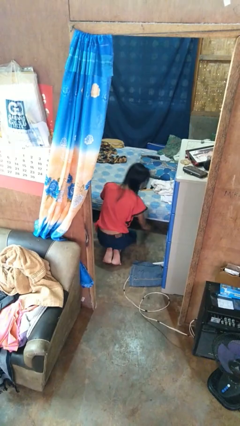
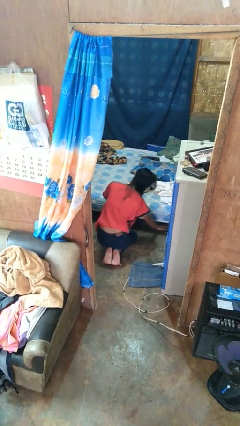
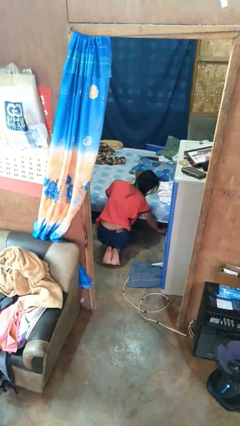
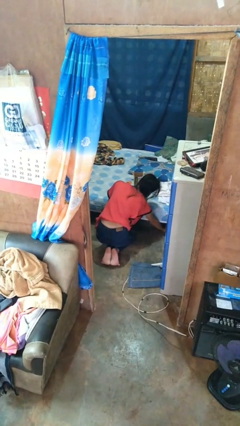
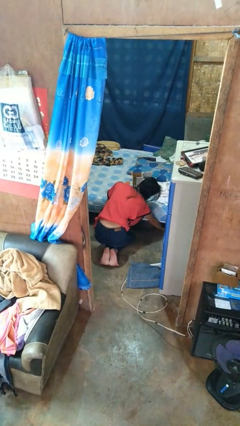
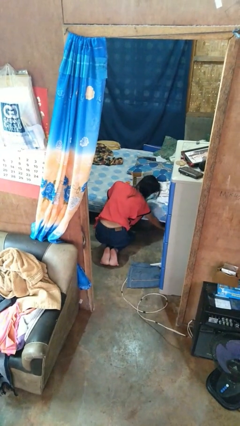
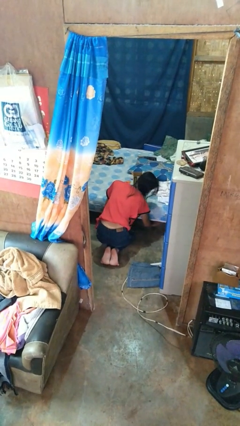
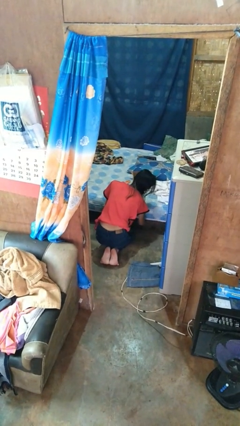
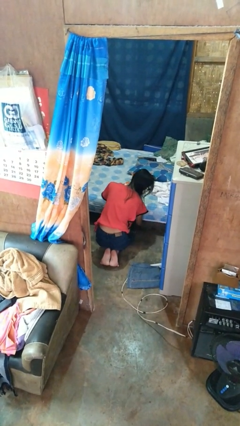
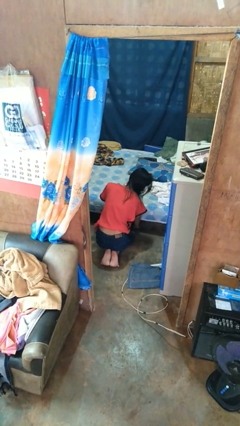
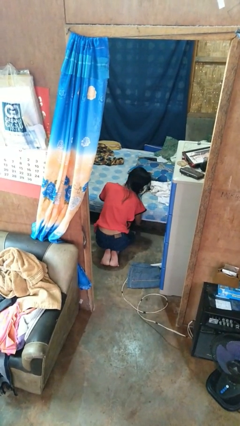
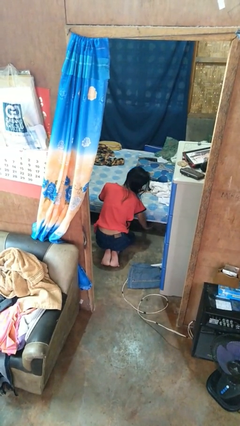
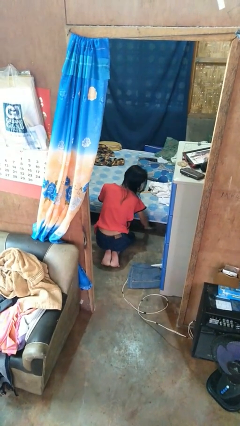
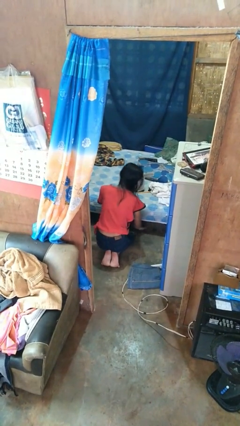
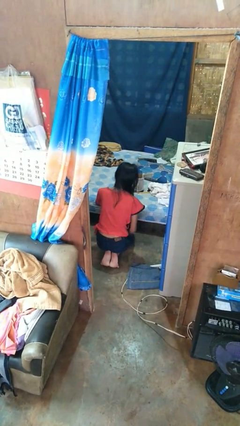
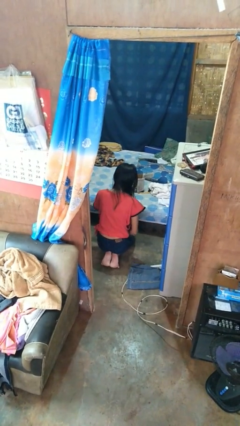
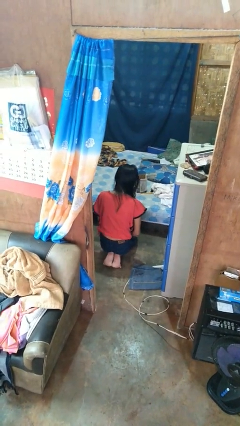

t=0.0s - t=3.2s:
person searches under bed

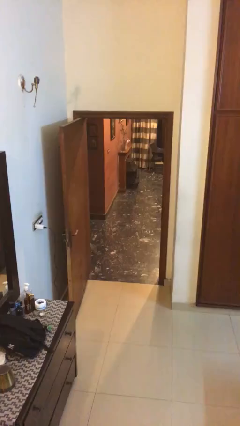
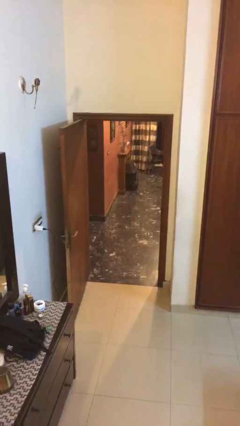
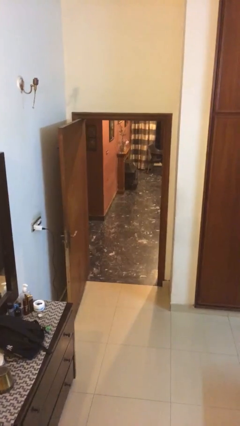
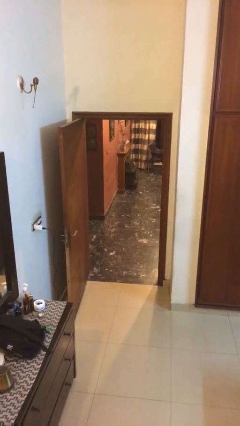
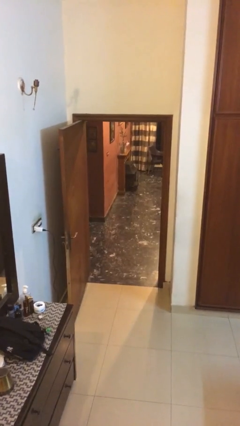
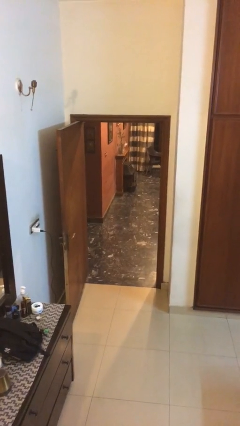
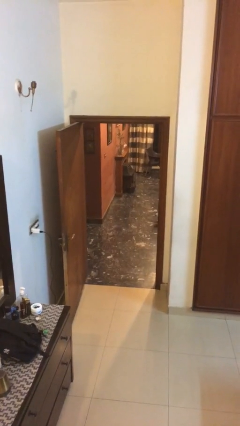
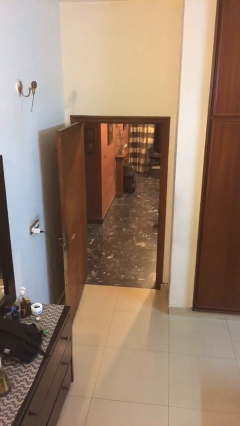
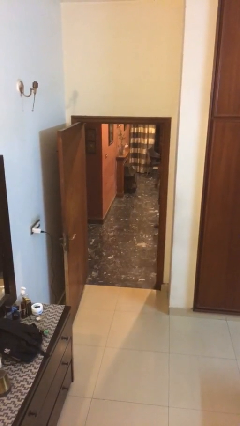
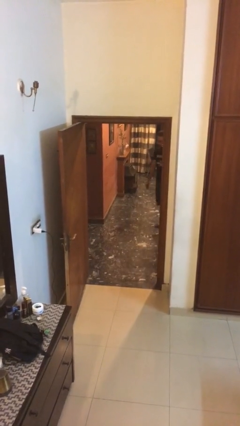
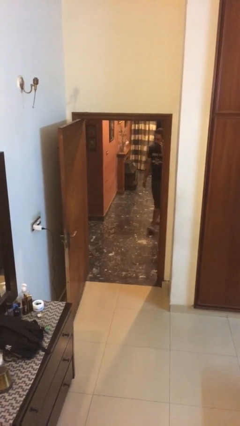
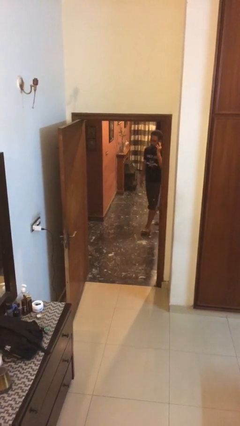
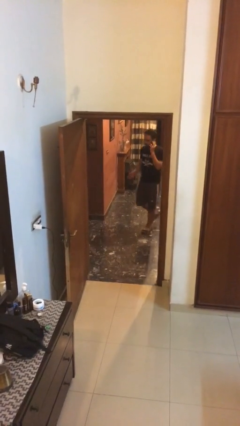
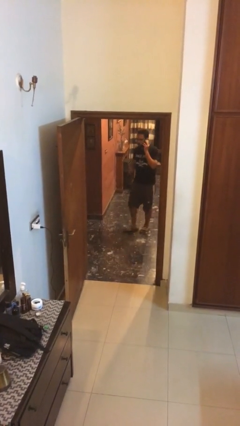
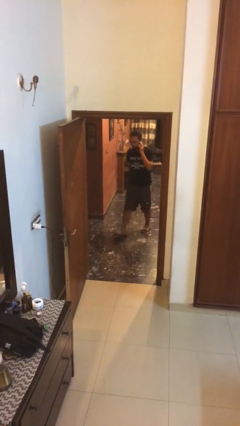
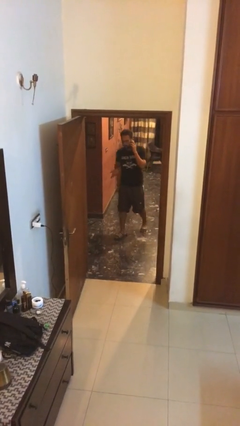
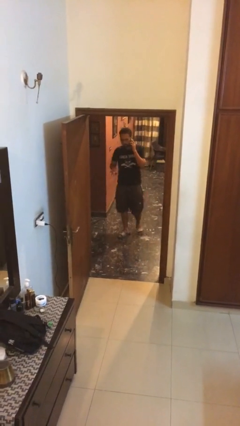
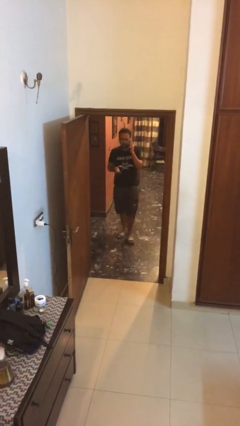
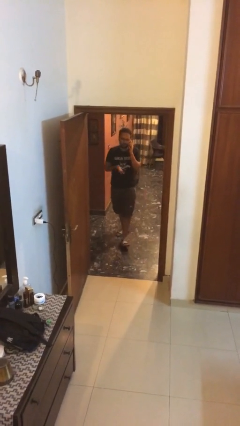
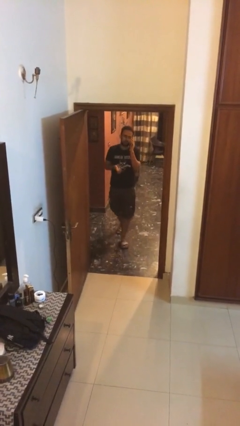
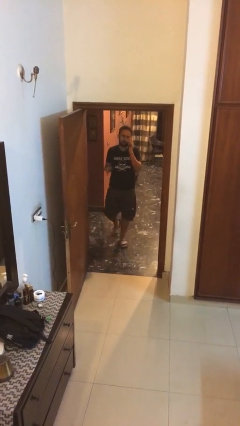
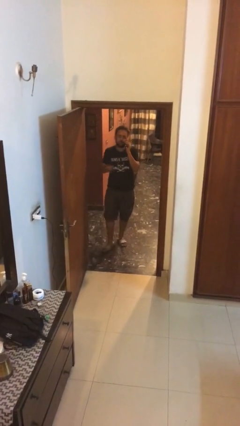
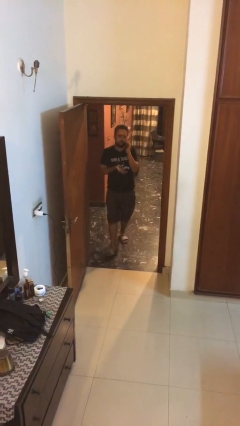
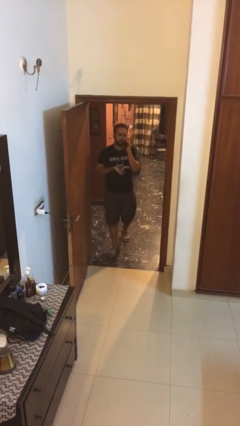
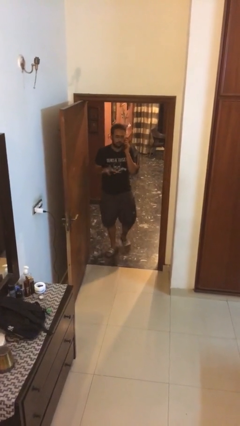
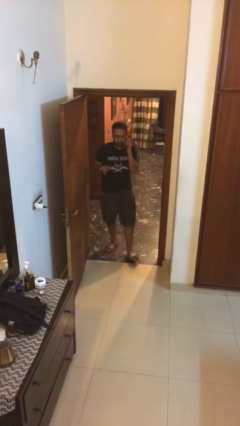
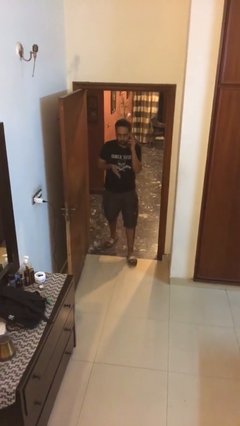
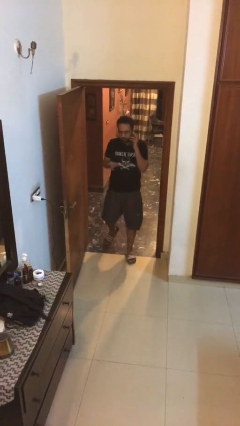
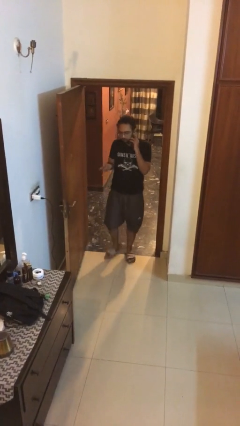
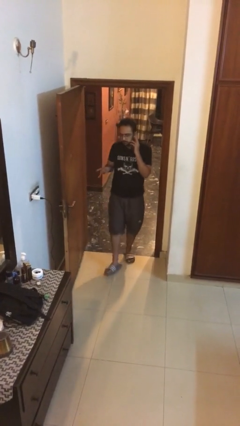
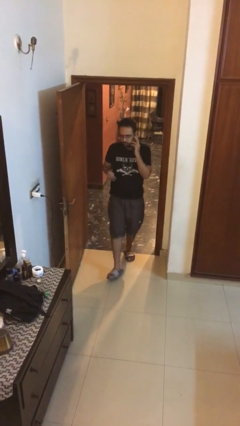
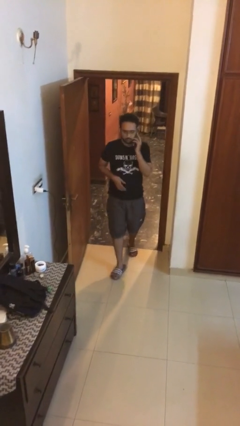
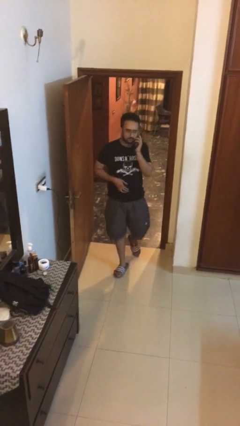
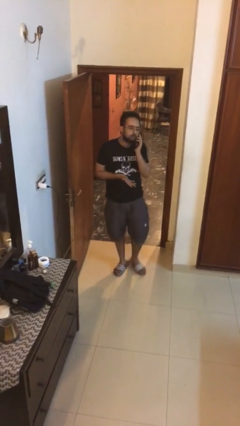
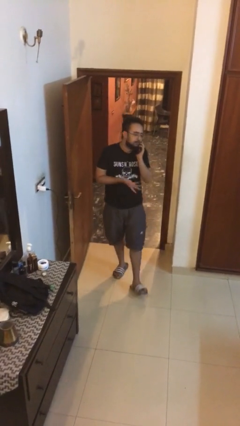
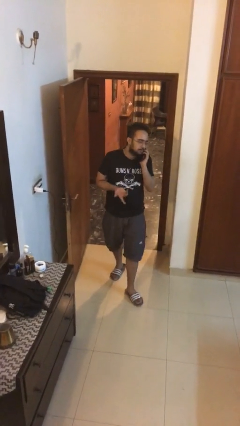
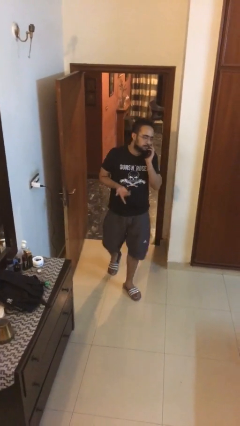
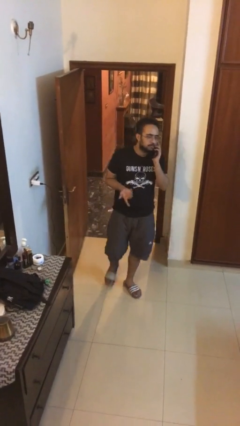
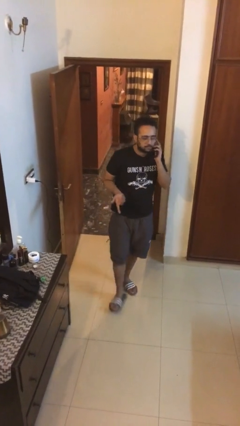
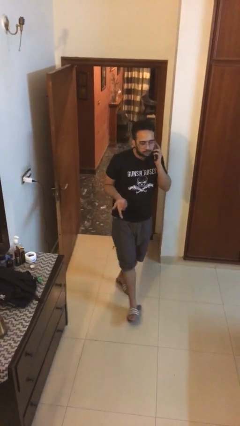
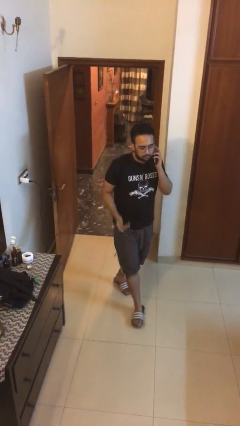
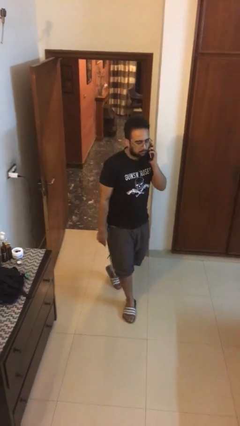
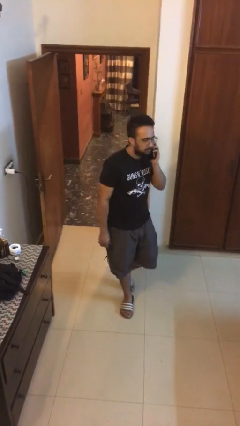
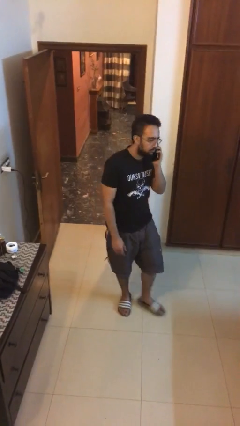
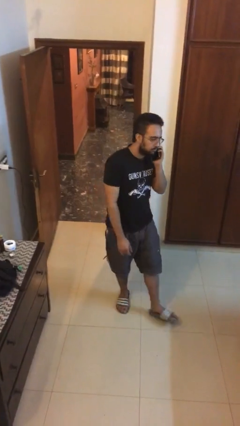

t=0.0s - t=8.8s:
person enters scene through structure

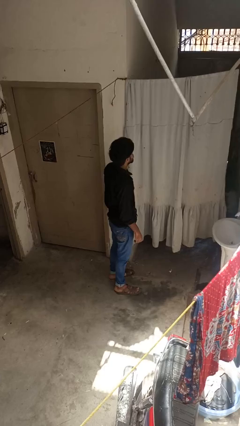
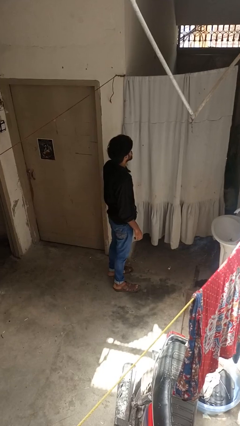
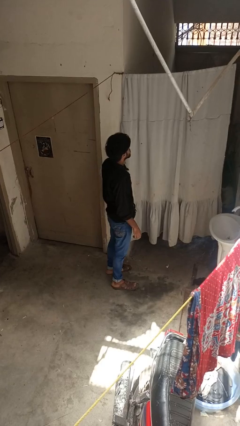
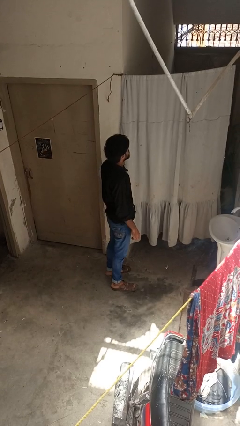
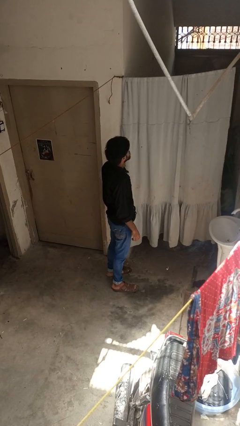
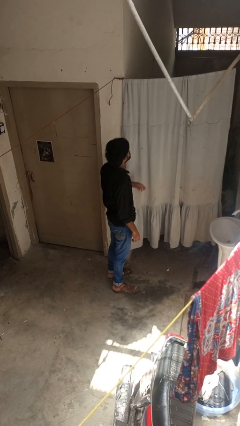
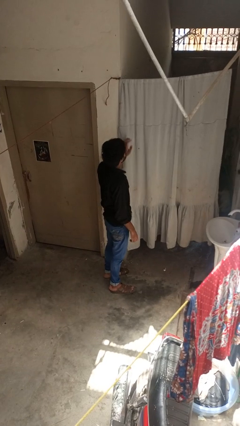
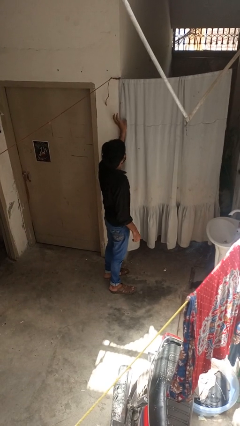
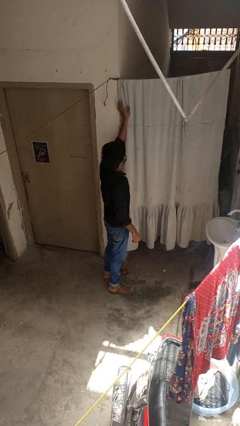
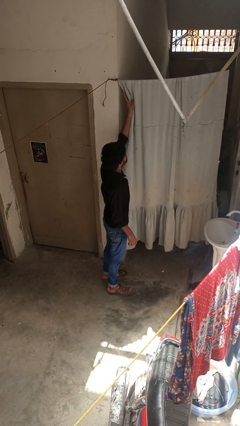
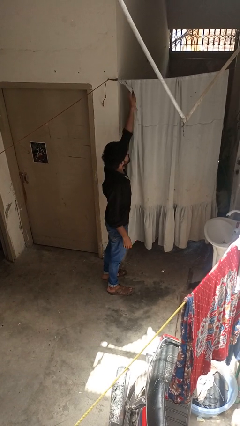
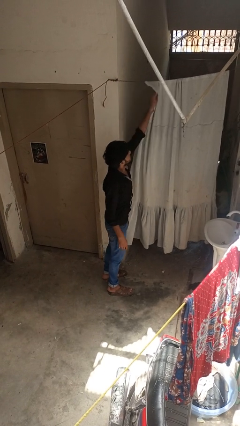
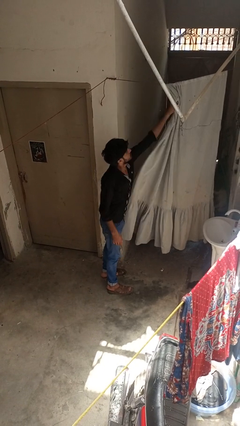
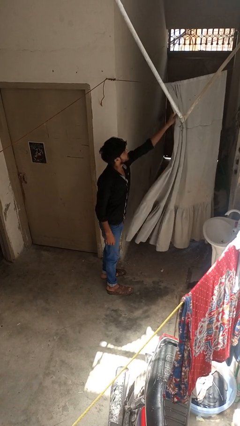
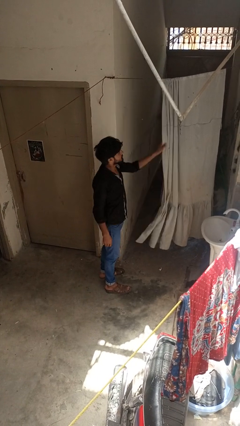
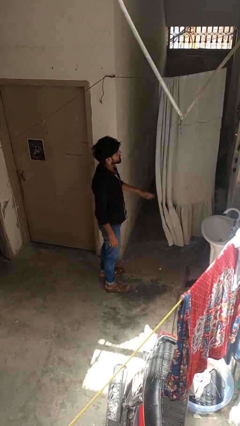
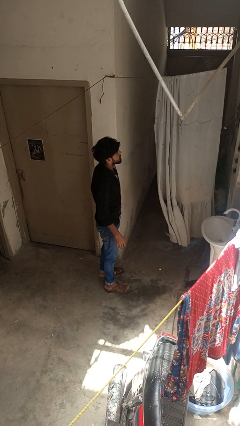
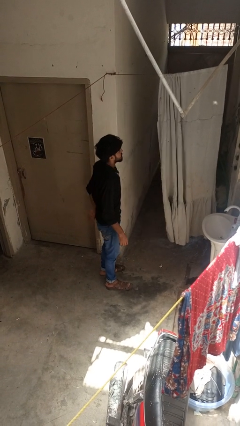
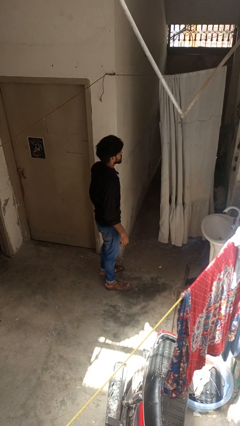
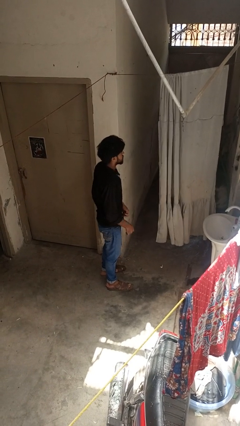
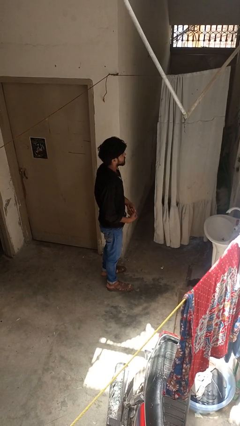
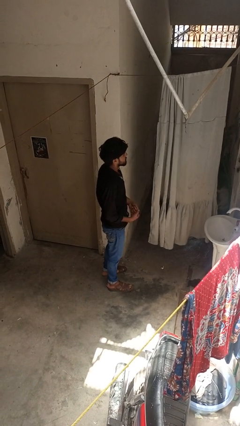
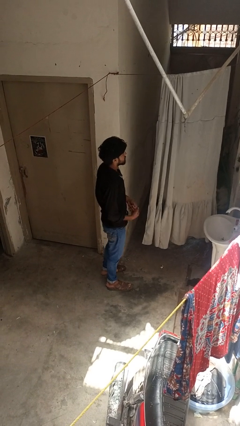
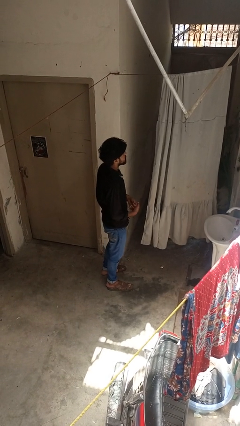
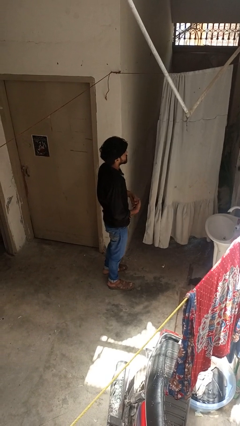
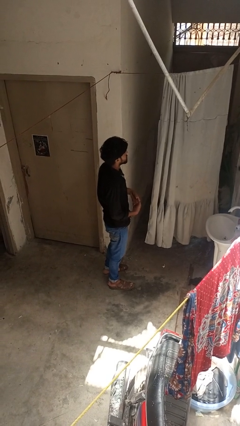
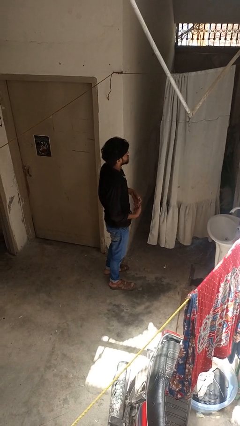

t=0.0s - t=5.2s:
person opens curtains
